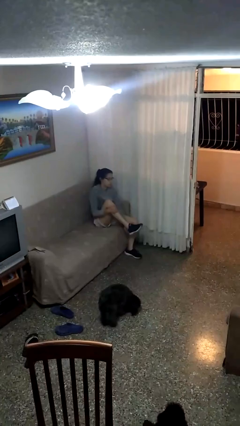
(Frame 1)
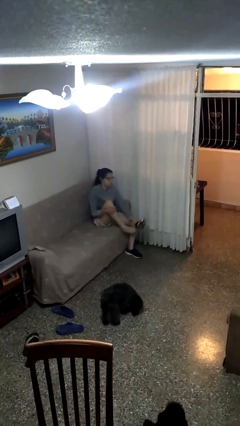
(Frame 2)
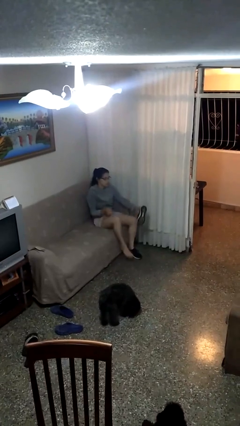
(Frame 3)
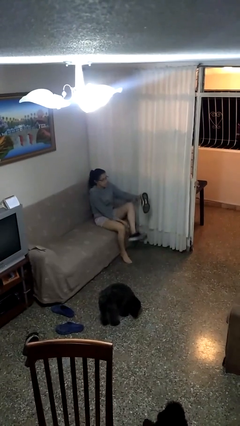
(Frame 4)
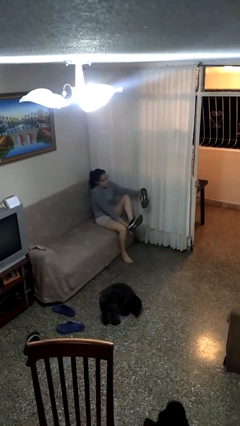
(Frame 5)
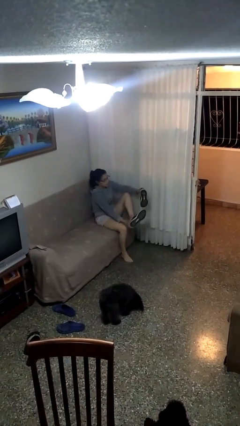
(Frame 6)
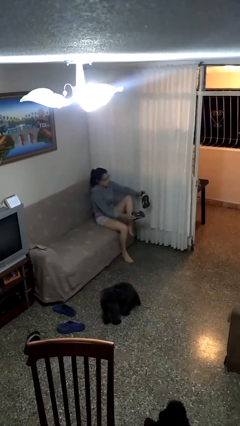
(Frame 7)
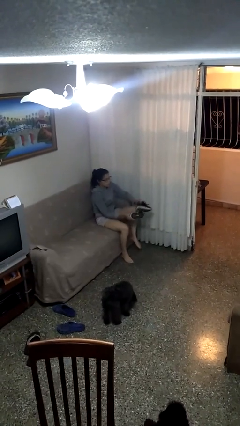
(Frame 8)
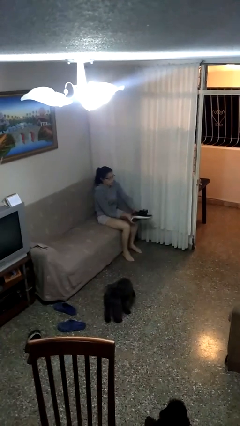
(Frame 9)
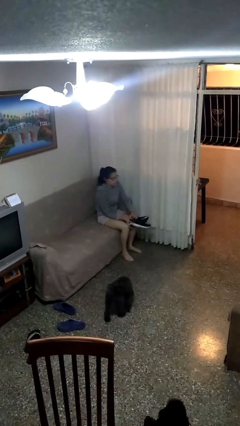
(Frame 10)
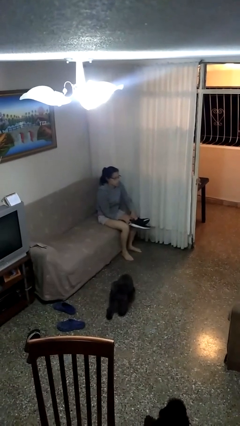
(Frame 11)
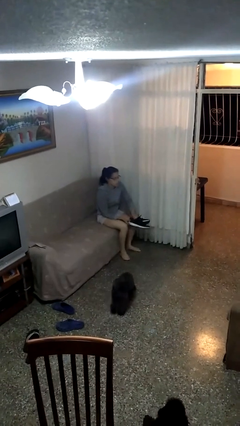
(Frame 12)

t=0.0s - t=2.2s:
person takes off shoes

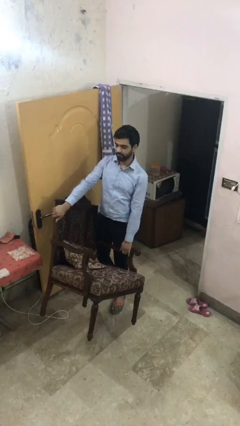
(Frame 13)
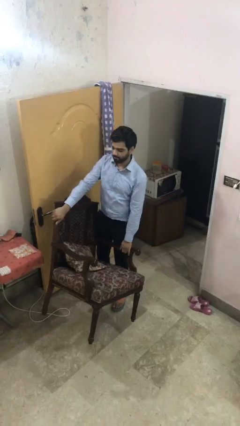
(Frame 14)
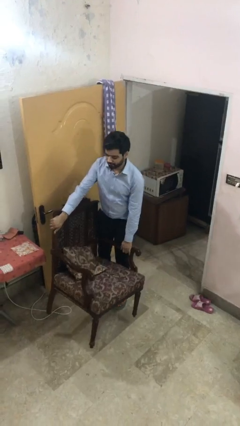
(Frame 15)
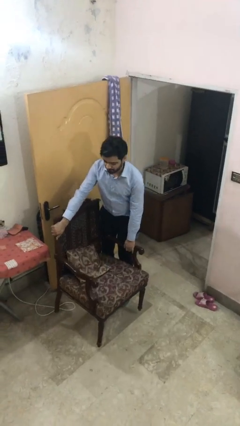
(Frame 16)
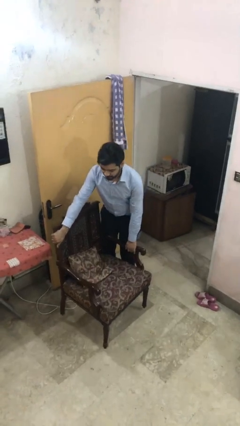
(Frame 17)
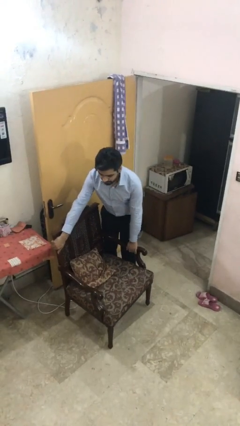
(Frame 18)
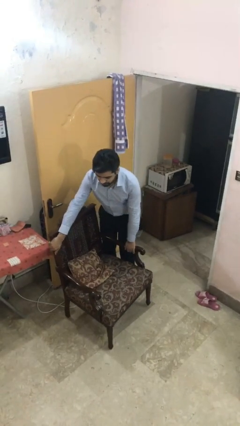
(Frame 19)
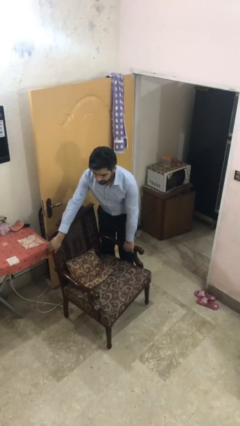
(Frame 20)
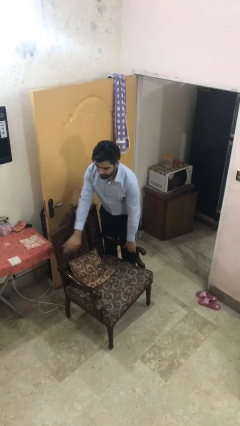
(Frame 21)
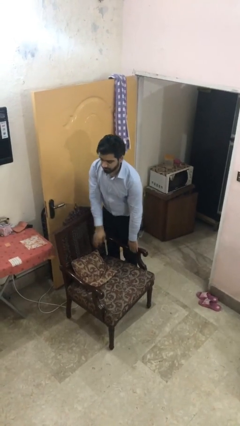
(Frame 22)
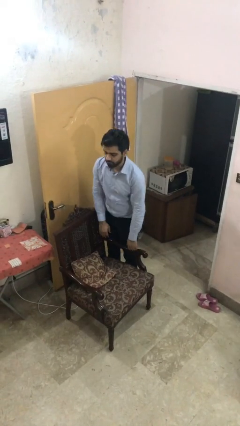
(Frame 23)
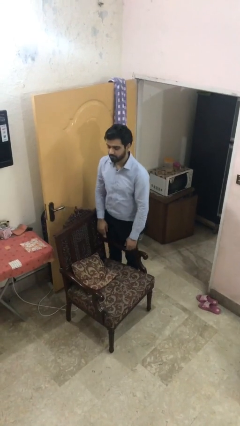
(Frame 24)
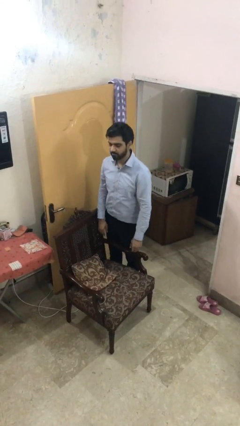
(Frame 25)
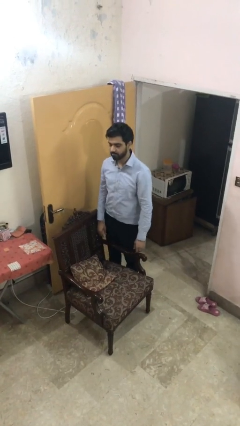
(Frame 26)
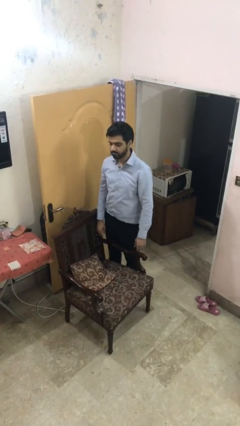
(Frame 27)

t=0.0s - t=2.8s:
person puts down object on floor

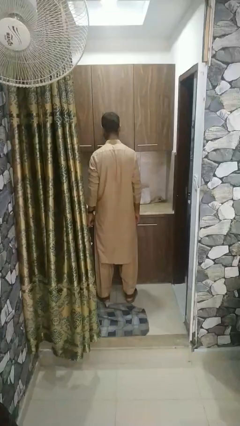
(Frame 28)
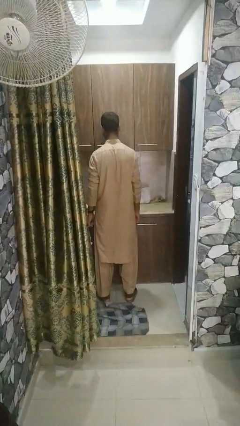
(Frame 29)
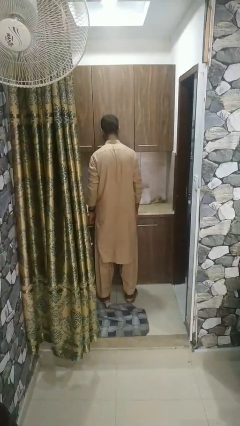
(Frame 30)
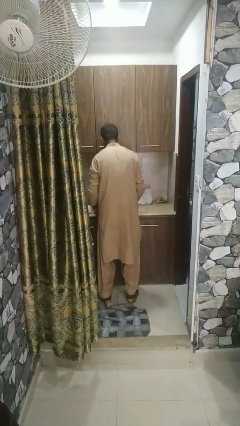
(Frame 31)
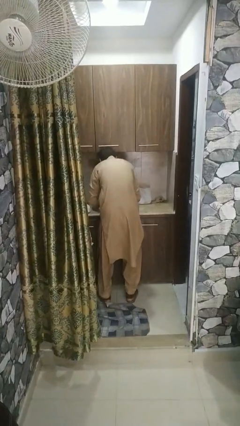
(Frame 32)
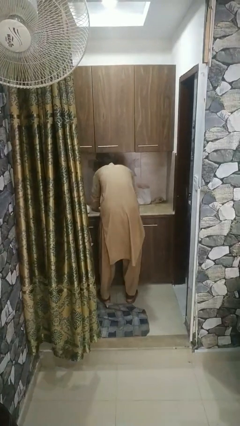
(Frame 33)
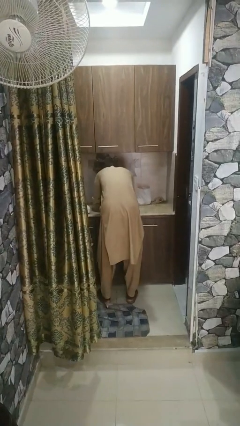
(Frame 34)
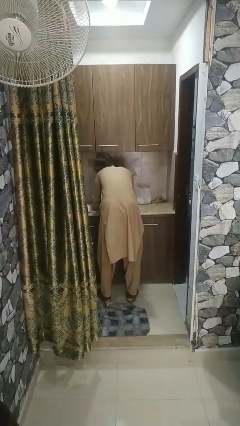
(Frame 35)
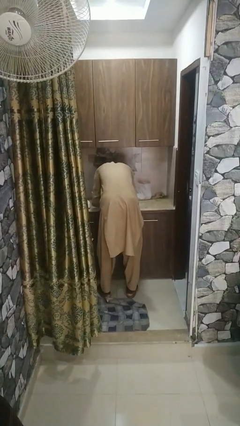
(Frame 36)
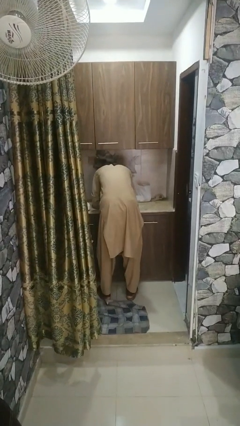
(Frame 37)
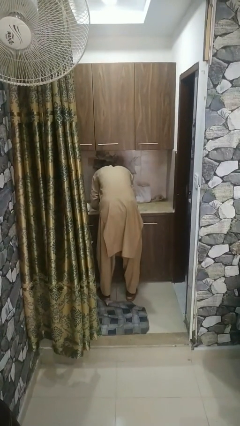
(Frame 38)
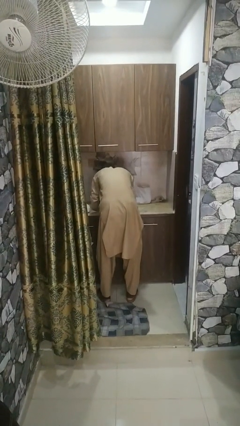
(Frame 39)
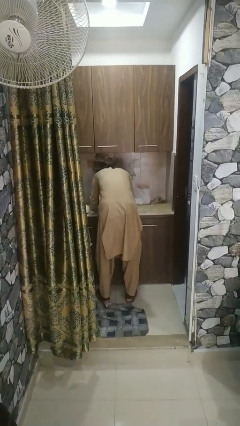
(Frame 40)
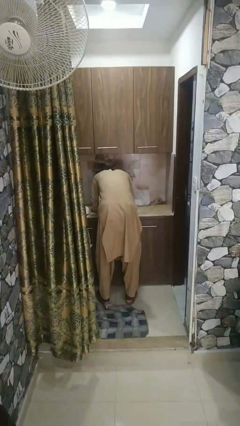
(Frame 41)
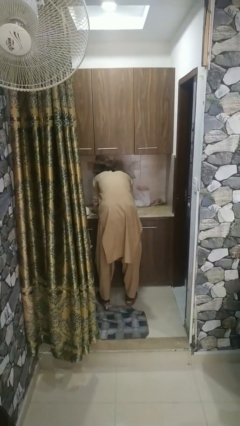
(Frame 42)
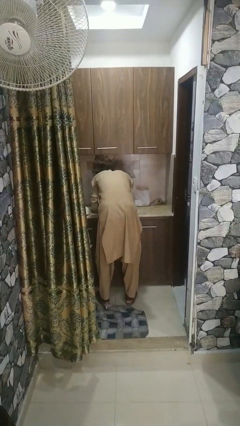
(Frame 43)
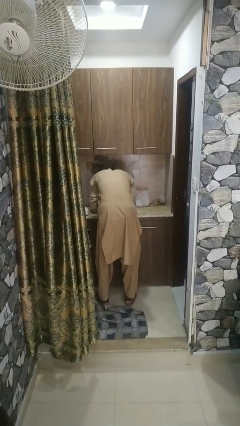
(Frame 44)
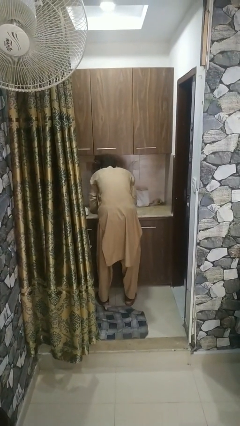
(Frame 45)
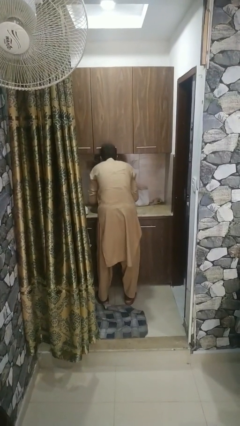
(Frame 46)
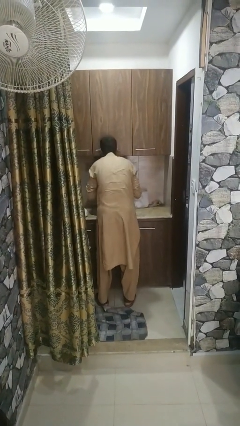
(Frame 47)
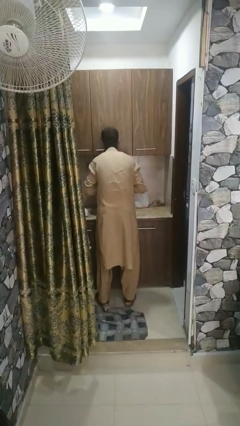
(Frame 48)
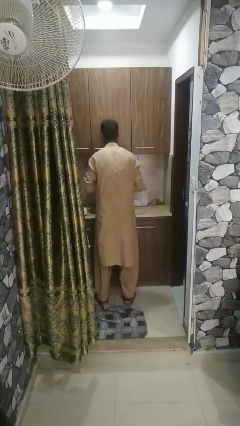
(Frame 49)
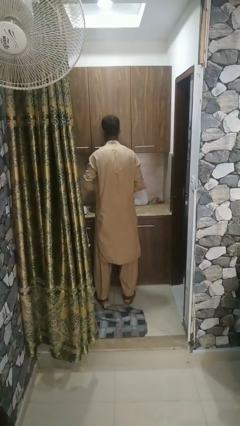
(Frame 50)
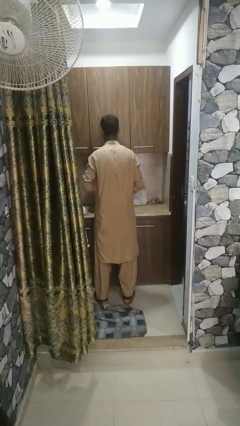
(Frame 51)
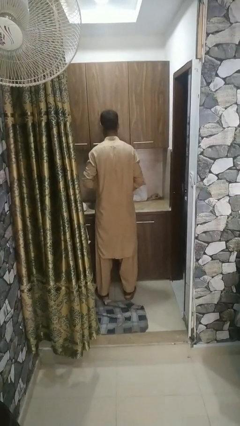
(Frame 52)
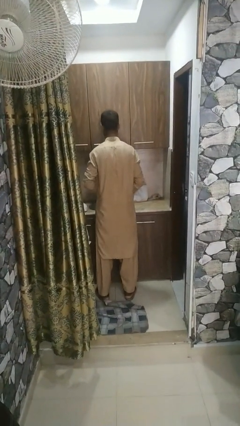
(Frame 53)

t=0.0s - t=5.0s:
person washes face

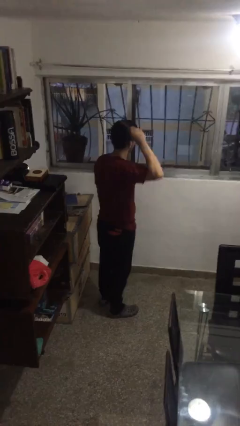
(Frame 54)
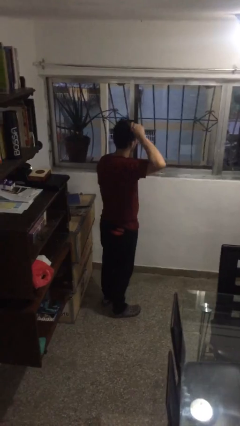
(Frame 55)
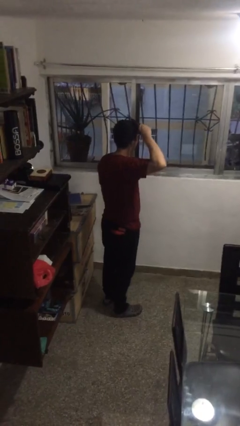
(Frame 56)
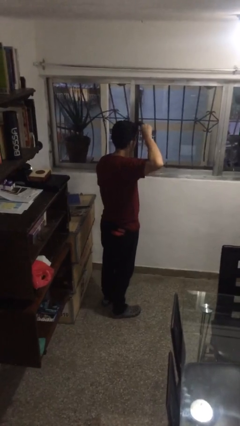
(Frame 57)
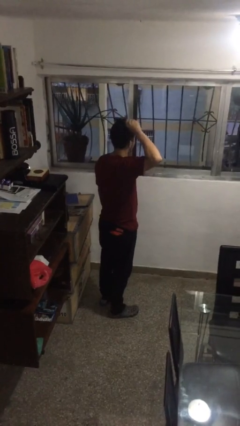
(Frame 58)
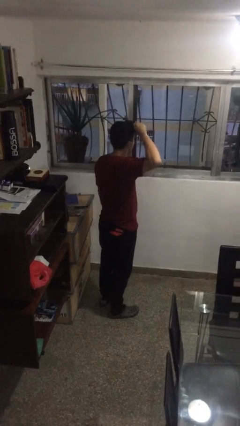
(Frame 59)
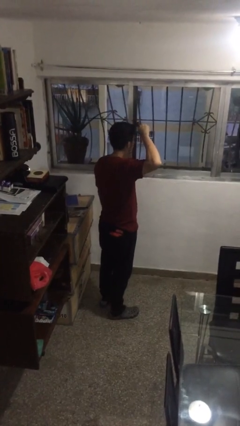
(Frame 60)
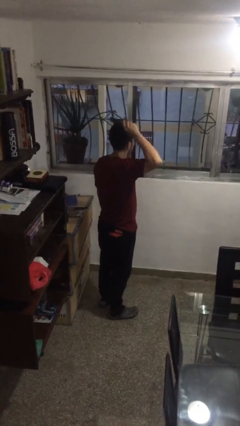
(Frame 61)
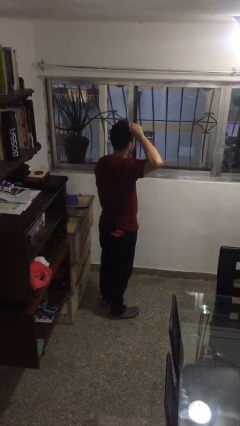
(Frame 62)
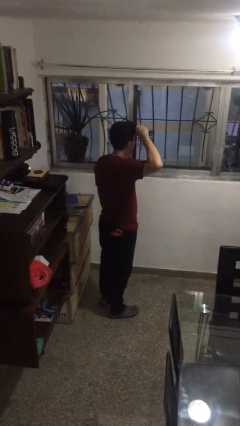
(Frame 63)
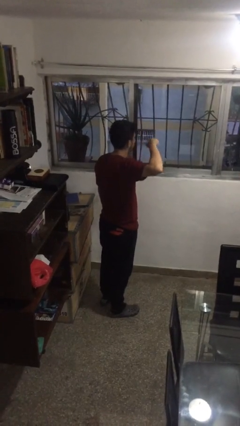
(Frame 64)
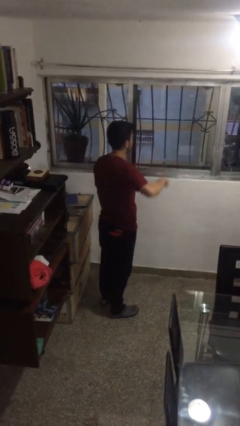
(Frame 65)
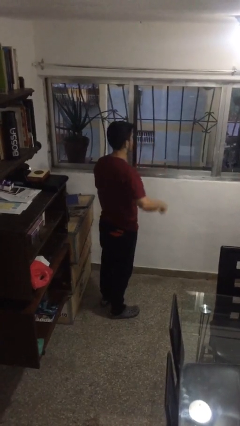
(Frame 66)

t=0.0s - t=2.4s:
person brushes hair

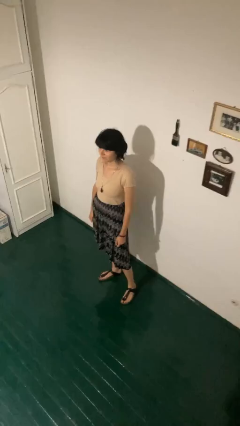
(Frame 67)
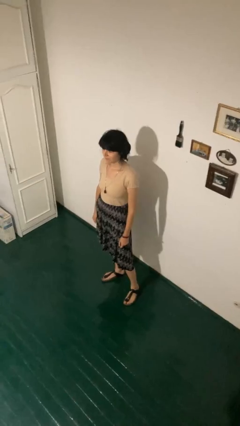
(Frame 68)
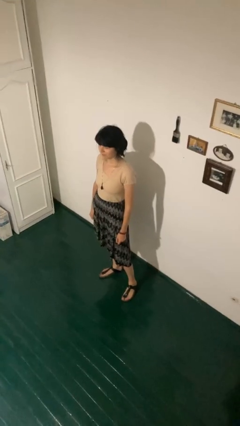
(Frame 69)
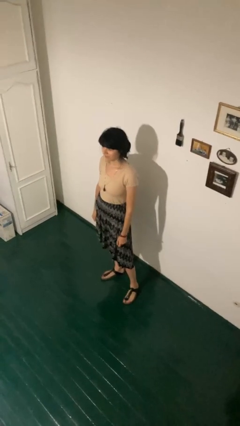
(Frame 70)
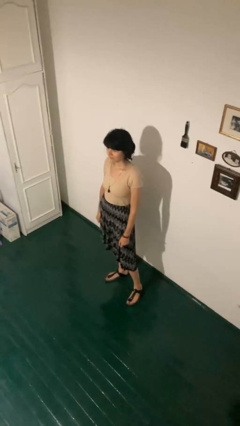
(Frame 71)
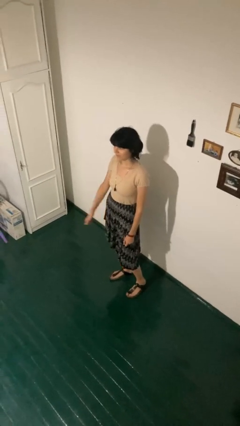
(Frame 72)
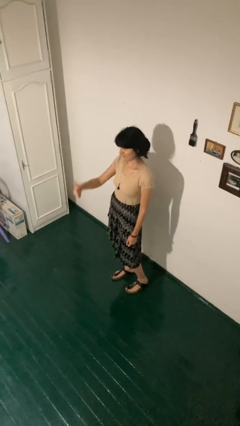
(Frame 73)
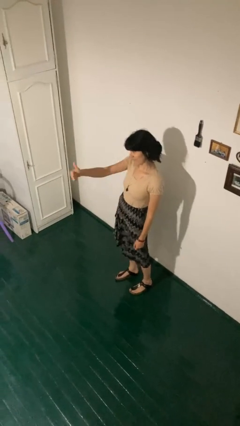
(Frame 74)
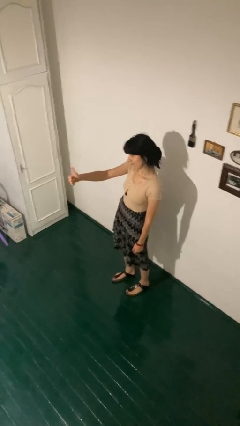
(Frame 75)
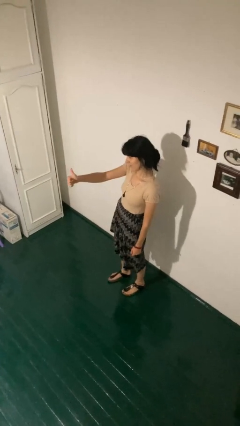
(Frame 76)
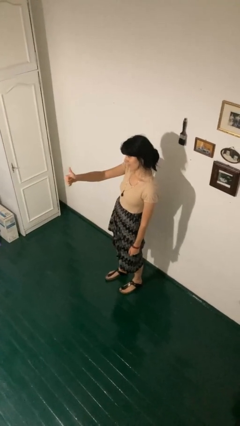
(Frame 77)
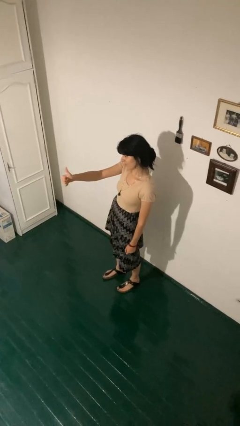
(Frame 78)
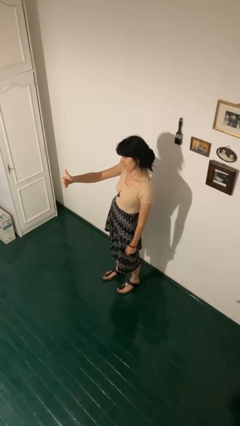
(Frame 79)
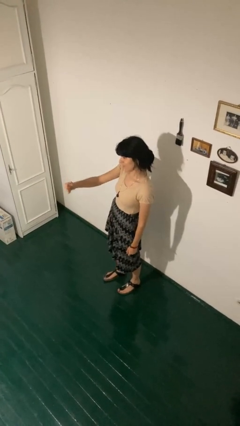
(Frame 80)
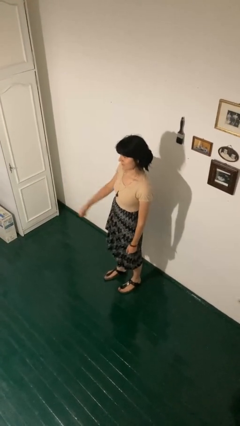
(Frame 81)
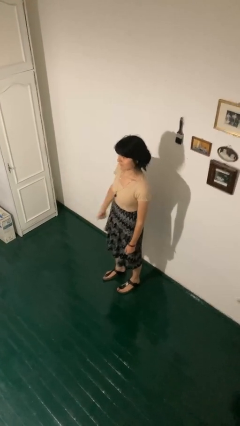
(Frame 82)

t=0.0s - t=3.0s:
person gestures thumbs up

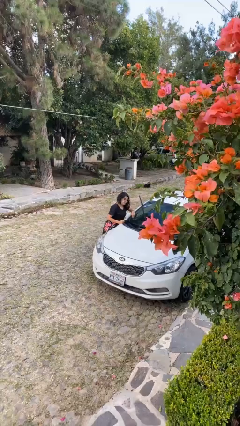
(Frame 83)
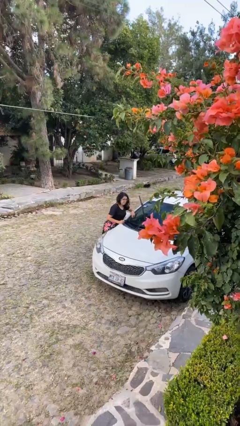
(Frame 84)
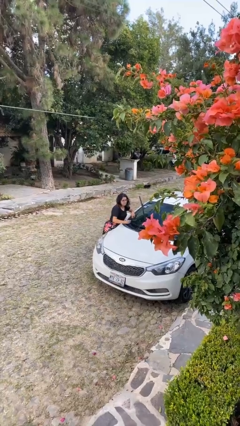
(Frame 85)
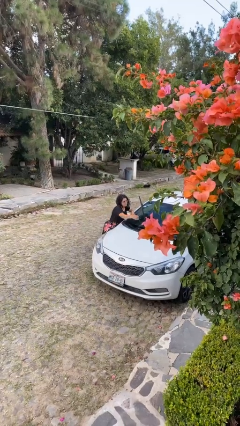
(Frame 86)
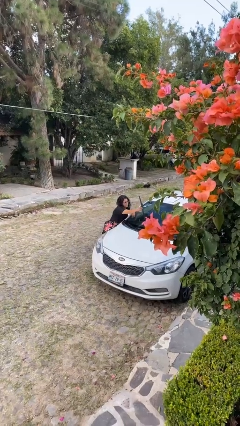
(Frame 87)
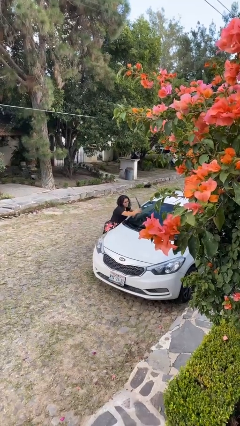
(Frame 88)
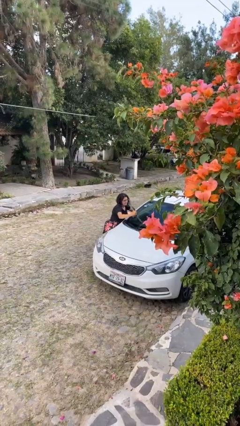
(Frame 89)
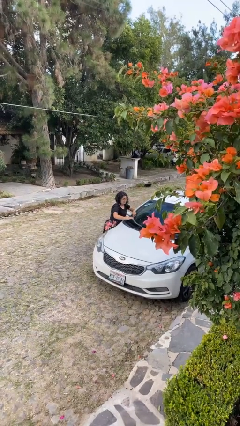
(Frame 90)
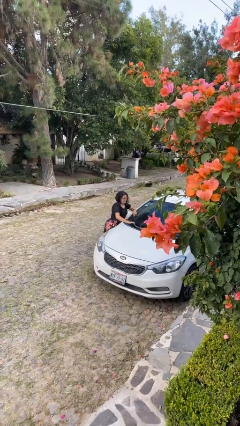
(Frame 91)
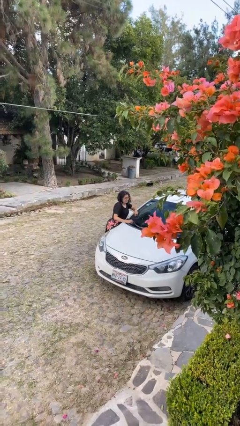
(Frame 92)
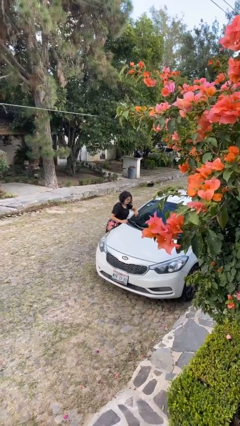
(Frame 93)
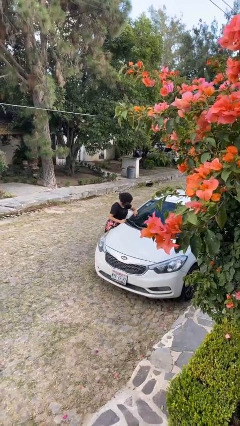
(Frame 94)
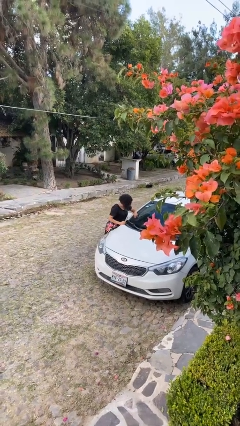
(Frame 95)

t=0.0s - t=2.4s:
person flips down car wipers
